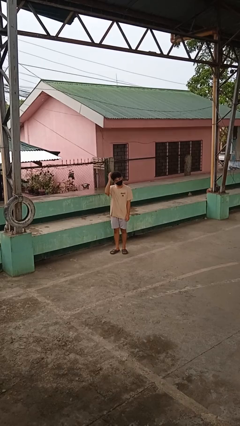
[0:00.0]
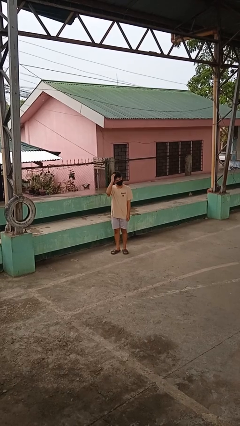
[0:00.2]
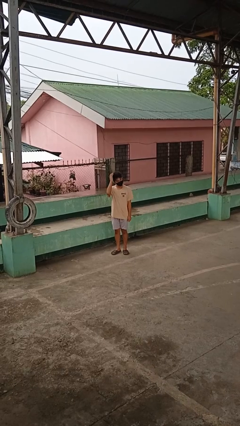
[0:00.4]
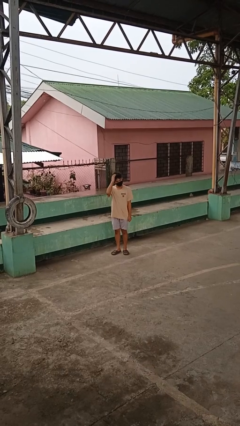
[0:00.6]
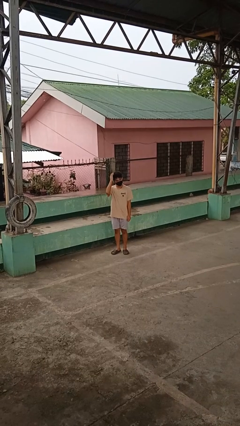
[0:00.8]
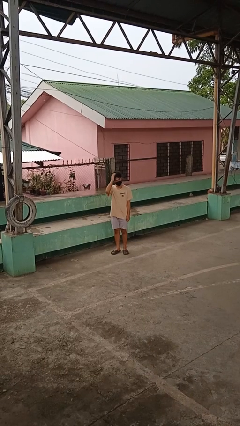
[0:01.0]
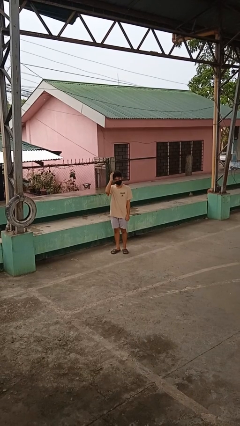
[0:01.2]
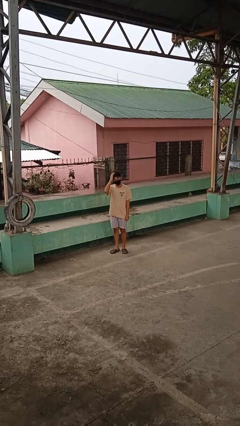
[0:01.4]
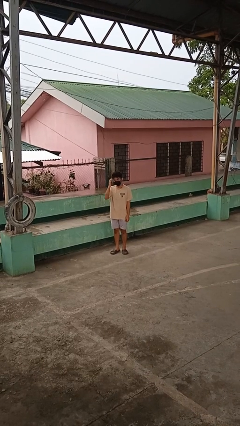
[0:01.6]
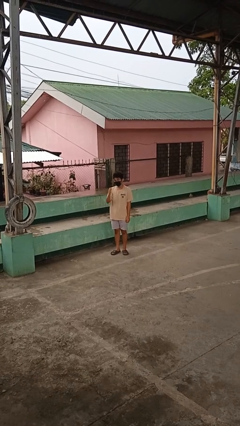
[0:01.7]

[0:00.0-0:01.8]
person pats head

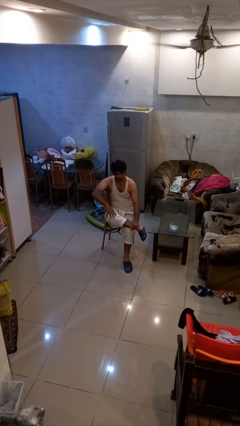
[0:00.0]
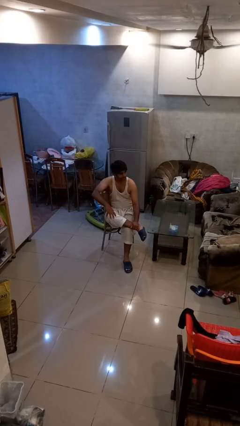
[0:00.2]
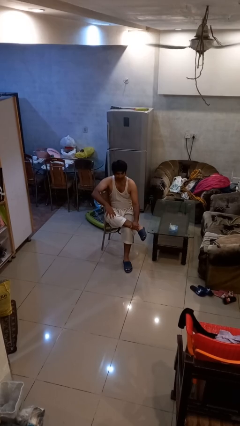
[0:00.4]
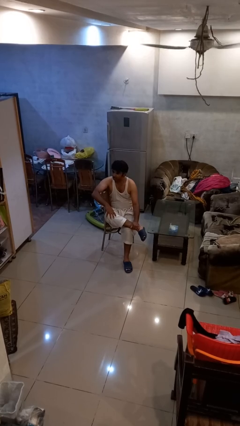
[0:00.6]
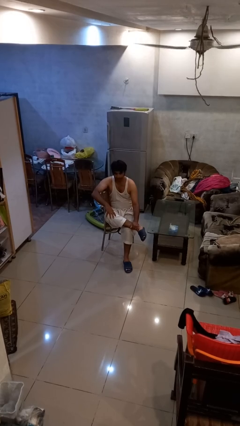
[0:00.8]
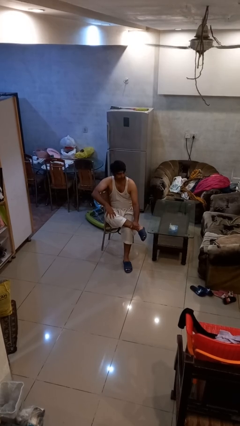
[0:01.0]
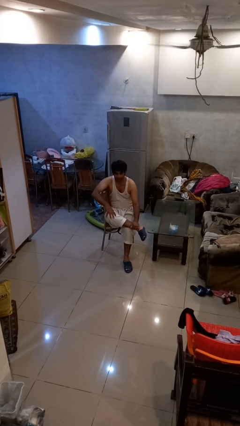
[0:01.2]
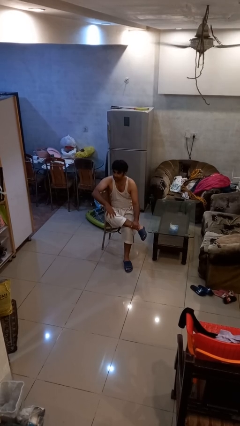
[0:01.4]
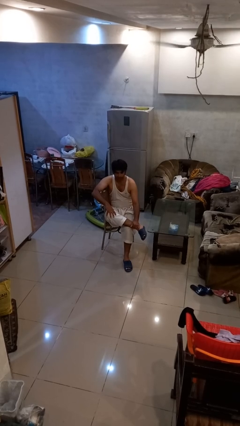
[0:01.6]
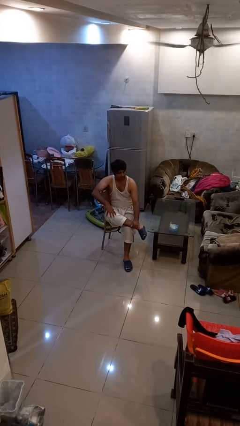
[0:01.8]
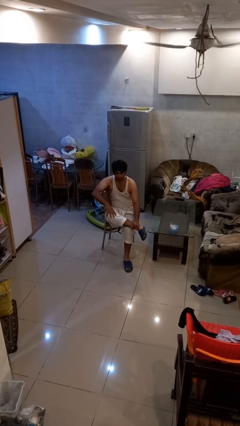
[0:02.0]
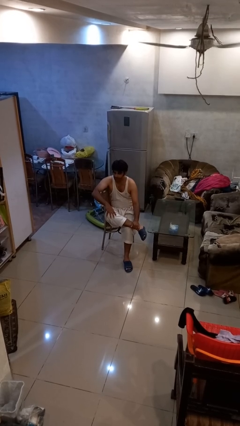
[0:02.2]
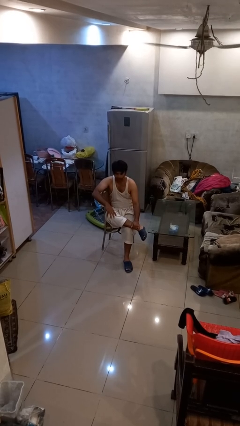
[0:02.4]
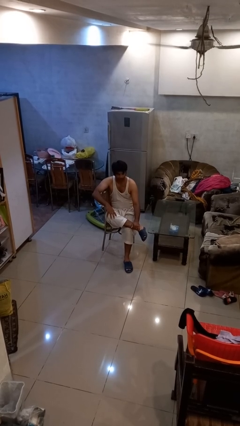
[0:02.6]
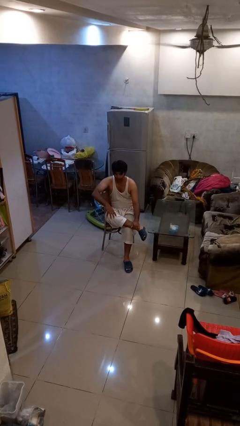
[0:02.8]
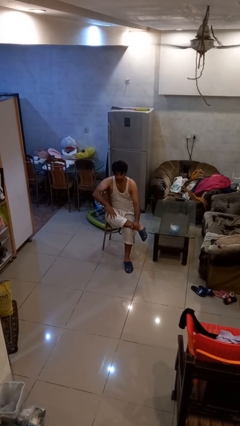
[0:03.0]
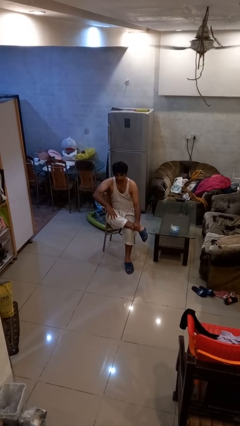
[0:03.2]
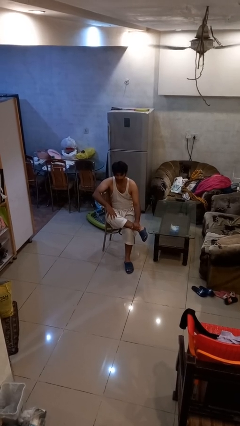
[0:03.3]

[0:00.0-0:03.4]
person shakes head

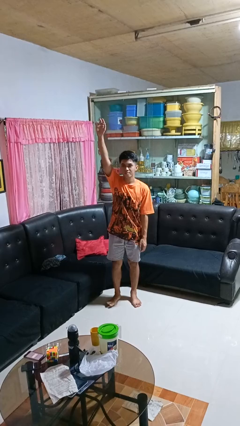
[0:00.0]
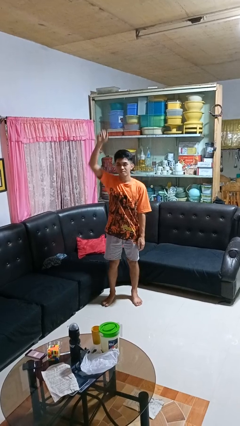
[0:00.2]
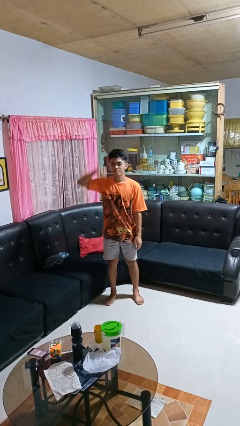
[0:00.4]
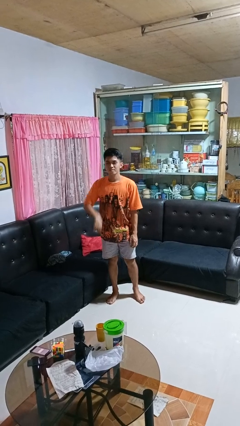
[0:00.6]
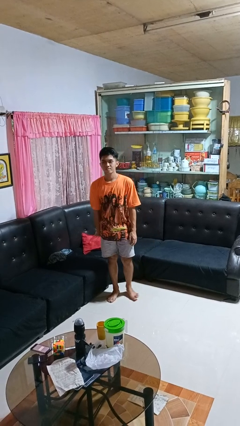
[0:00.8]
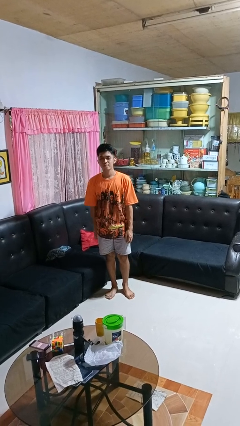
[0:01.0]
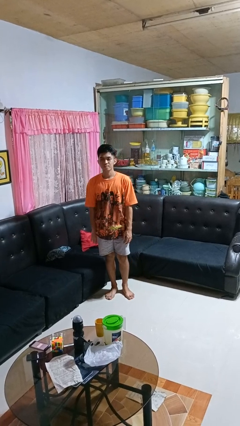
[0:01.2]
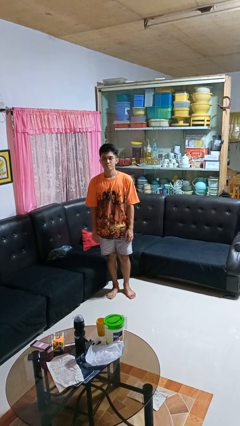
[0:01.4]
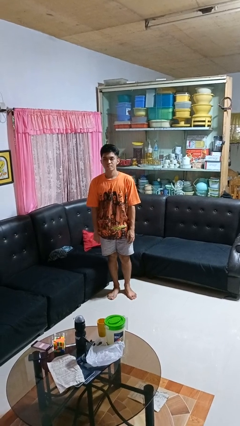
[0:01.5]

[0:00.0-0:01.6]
person gestures lower hand

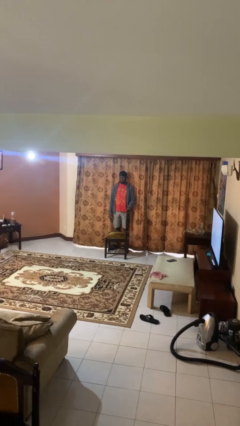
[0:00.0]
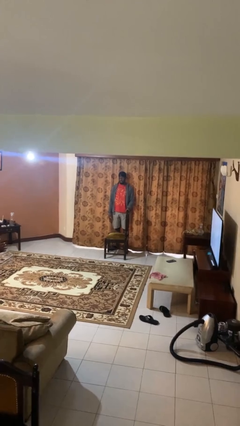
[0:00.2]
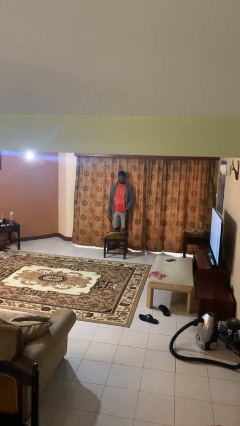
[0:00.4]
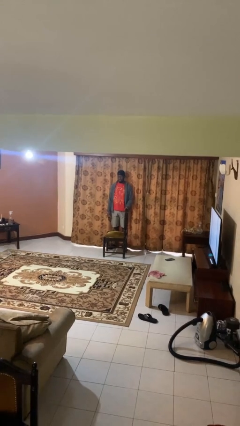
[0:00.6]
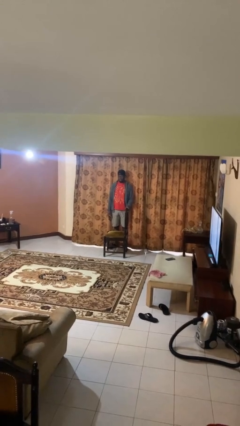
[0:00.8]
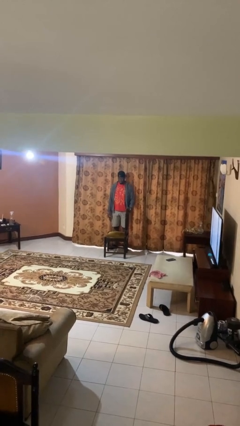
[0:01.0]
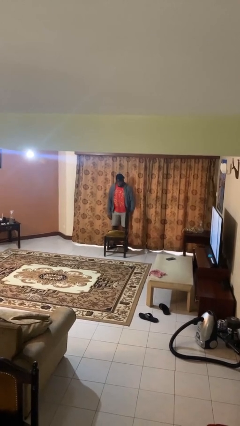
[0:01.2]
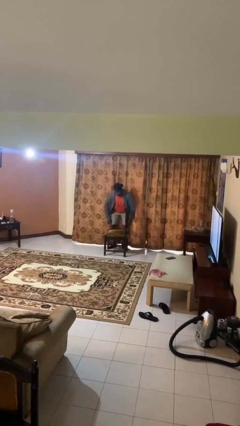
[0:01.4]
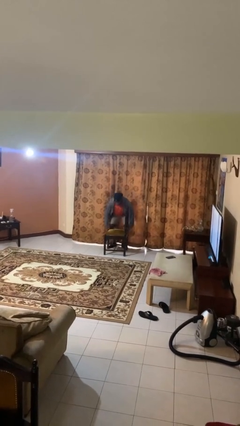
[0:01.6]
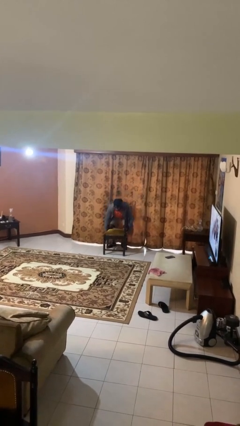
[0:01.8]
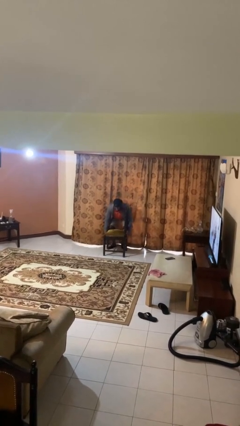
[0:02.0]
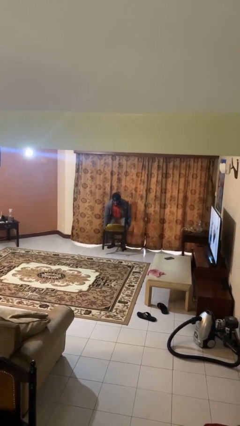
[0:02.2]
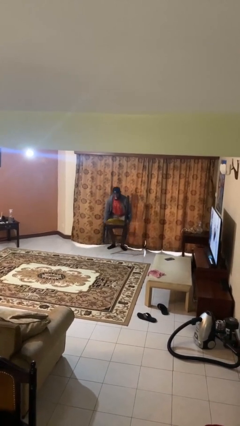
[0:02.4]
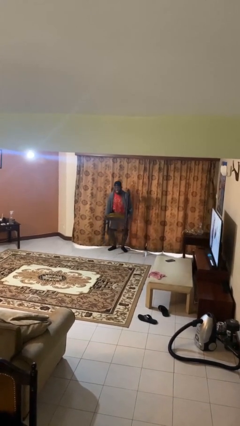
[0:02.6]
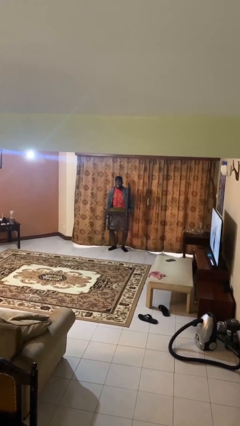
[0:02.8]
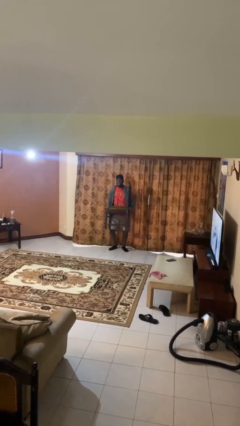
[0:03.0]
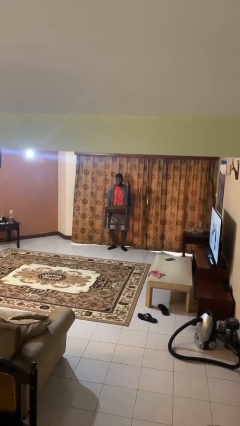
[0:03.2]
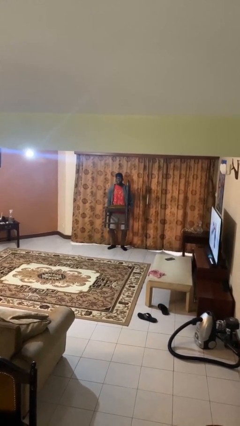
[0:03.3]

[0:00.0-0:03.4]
person picks up object from floor

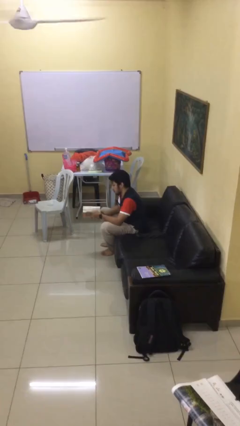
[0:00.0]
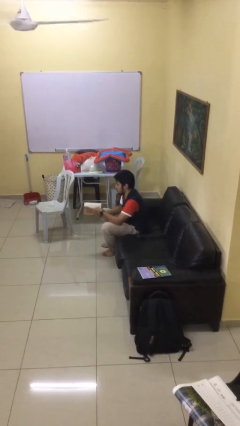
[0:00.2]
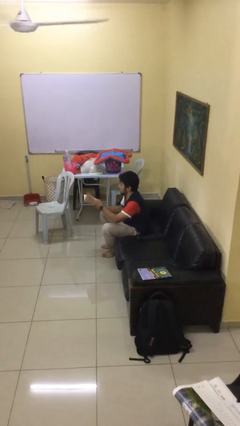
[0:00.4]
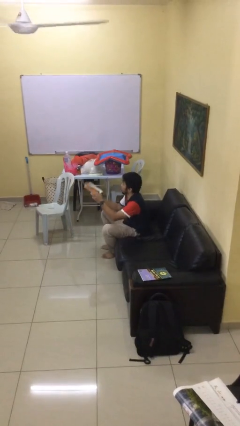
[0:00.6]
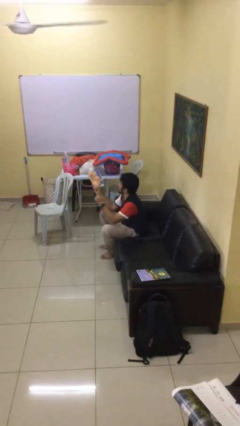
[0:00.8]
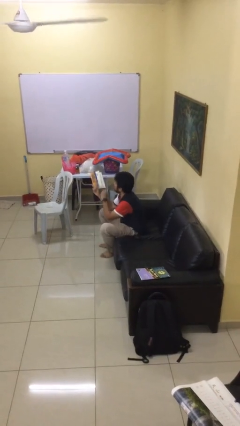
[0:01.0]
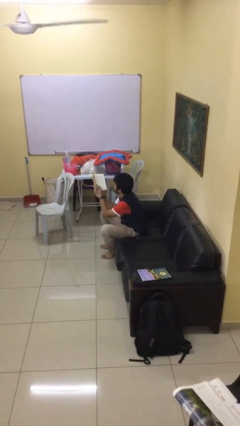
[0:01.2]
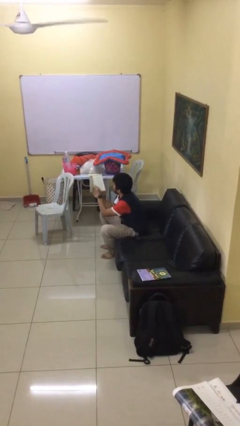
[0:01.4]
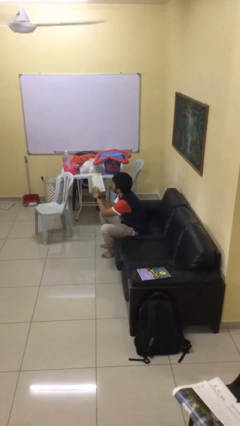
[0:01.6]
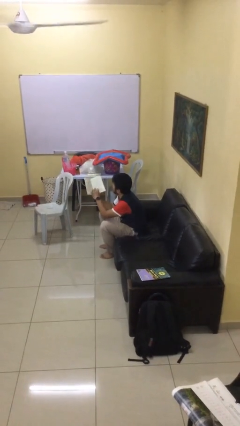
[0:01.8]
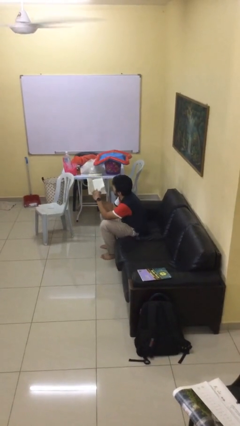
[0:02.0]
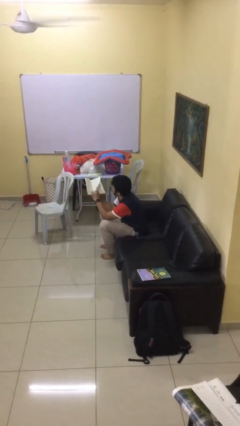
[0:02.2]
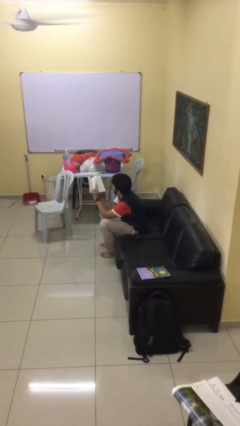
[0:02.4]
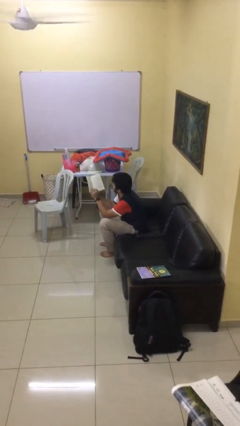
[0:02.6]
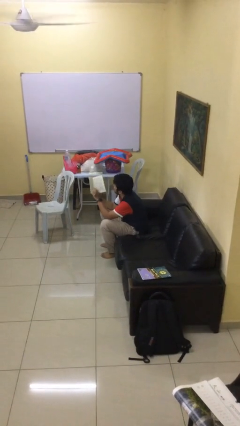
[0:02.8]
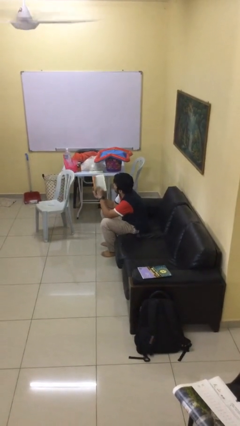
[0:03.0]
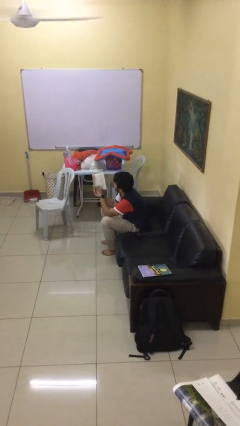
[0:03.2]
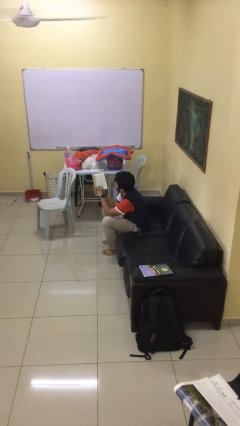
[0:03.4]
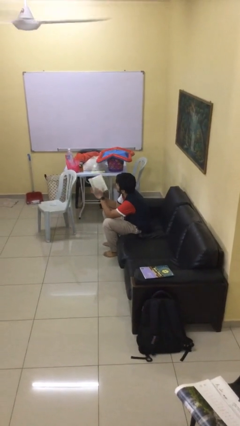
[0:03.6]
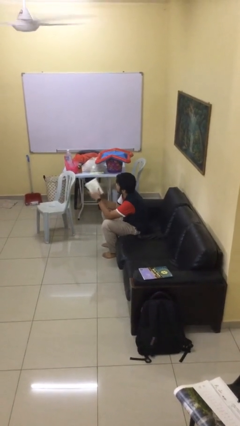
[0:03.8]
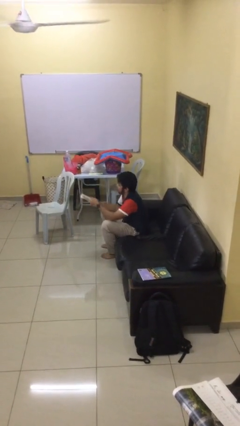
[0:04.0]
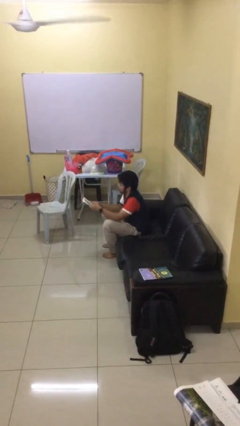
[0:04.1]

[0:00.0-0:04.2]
person reads book

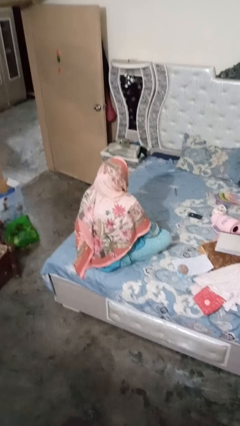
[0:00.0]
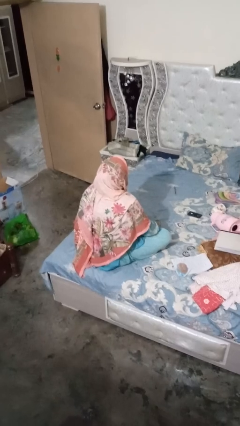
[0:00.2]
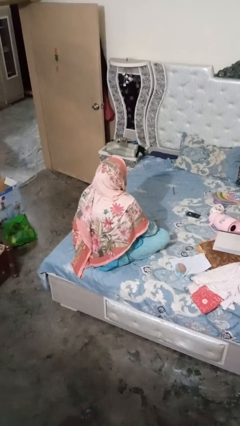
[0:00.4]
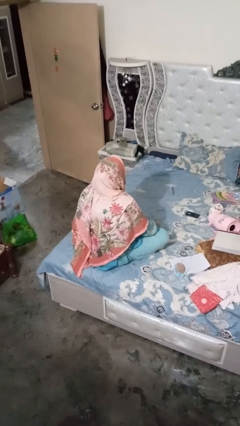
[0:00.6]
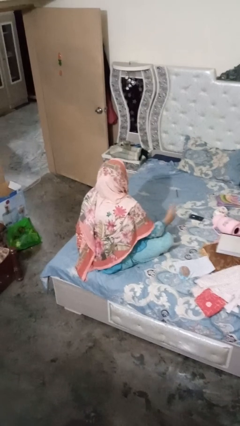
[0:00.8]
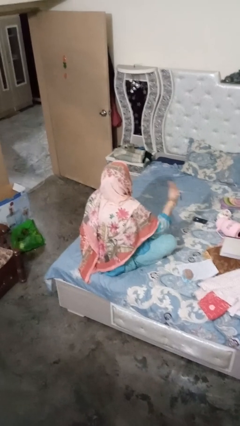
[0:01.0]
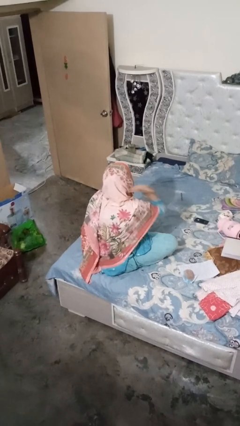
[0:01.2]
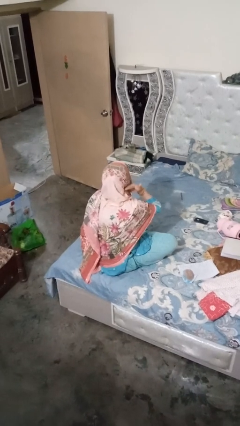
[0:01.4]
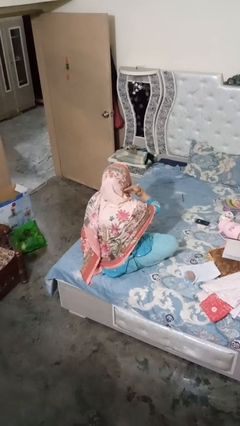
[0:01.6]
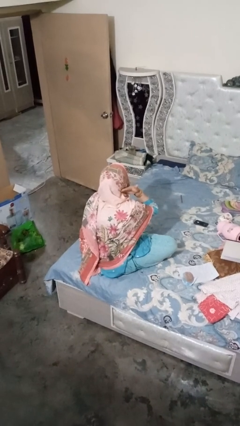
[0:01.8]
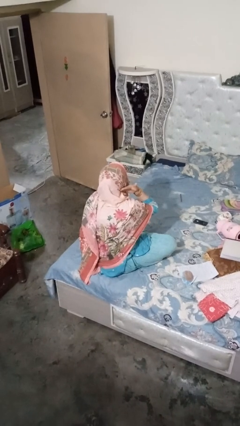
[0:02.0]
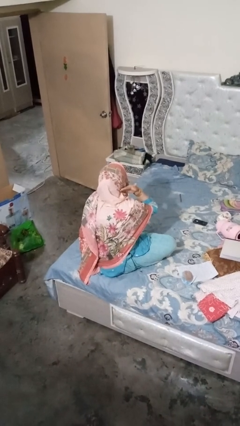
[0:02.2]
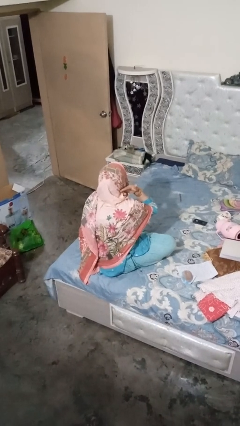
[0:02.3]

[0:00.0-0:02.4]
person gestures cut

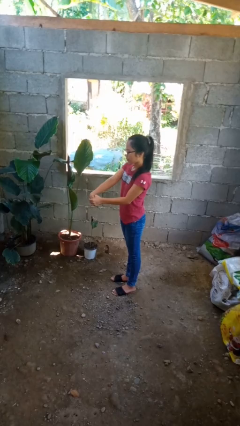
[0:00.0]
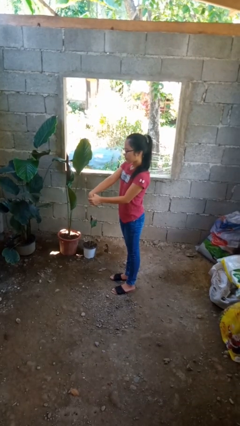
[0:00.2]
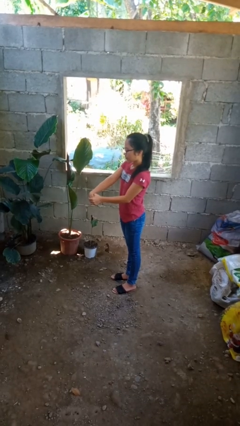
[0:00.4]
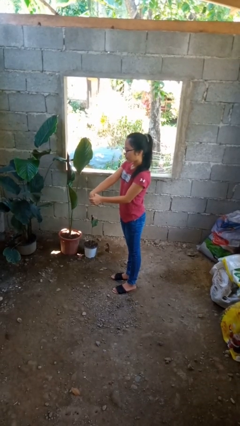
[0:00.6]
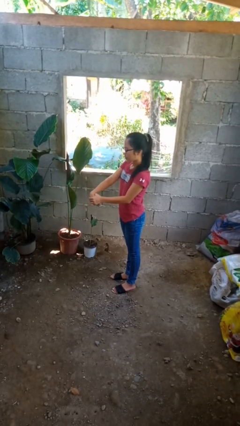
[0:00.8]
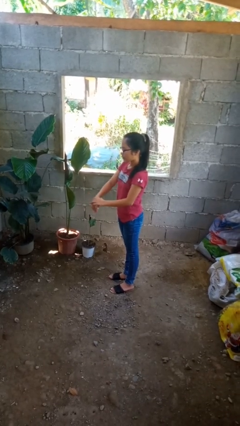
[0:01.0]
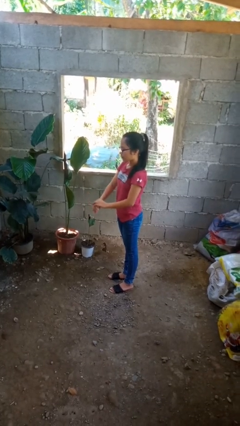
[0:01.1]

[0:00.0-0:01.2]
person cracks knuckles
